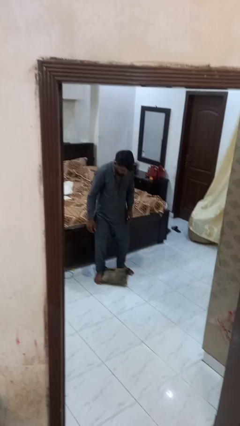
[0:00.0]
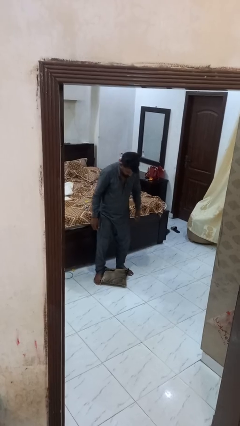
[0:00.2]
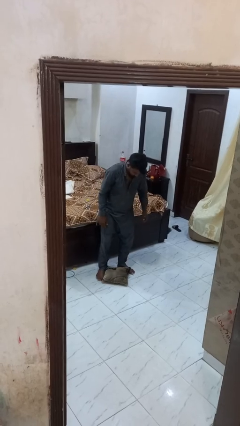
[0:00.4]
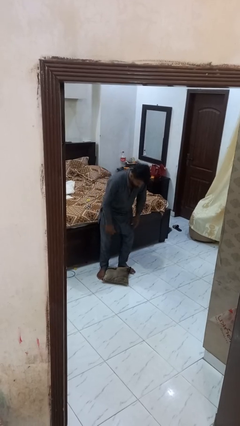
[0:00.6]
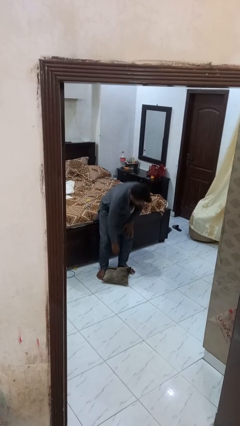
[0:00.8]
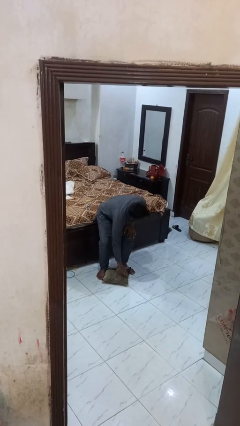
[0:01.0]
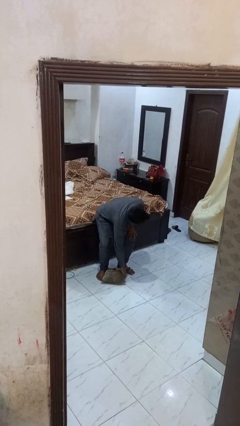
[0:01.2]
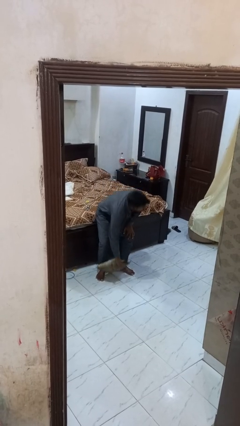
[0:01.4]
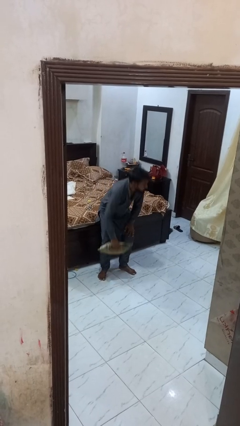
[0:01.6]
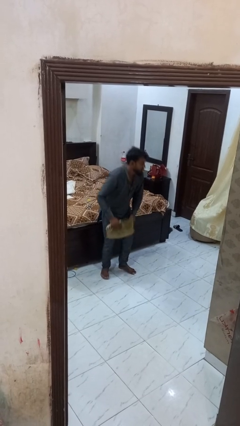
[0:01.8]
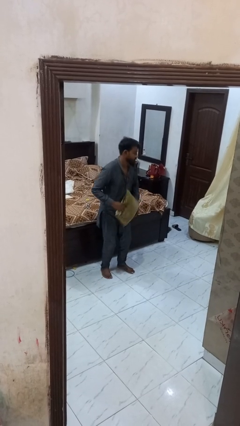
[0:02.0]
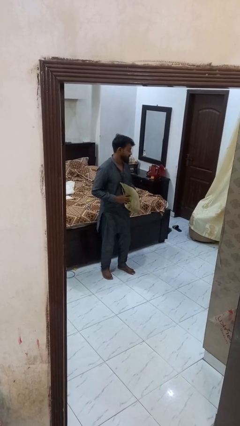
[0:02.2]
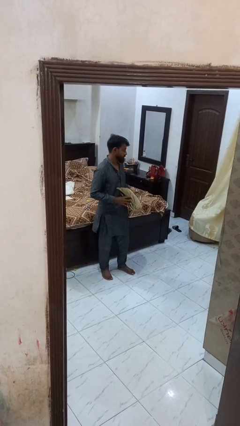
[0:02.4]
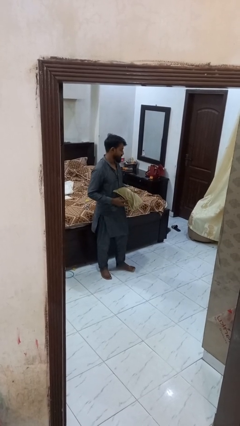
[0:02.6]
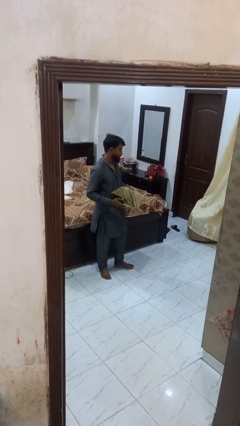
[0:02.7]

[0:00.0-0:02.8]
person picks up object from floor

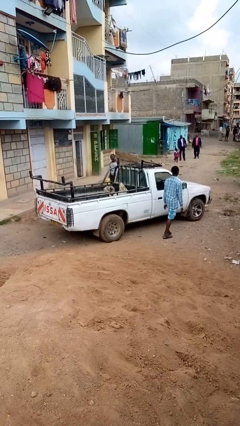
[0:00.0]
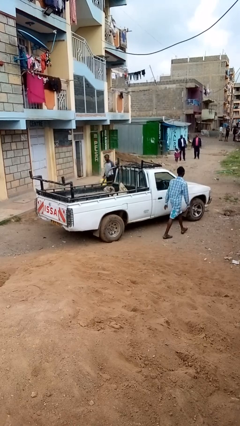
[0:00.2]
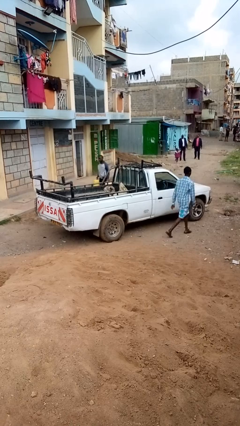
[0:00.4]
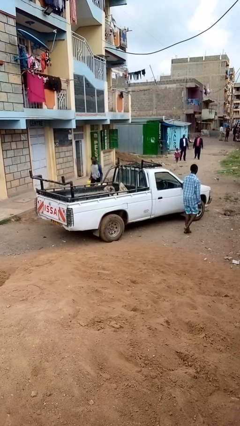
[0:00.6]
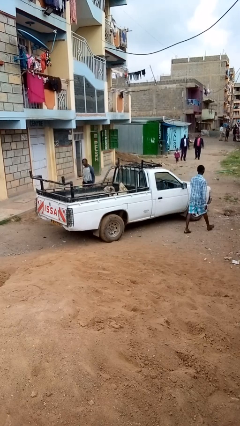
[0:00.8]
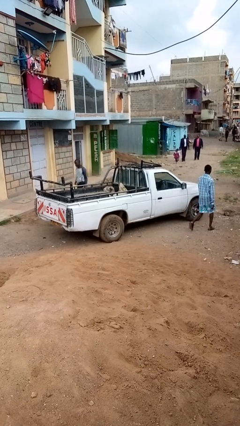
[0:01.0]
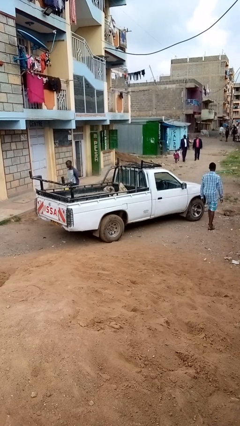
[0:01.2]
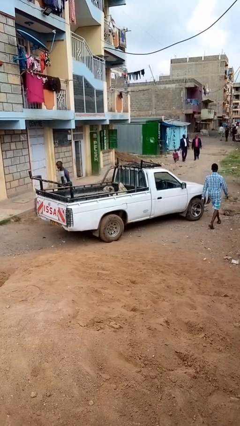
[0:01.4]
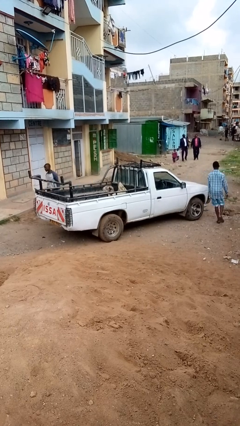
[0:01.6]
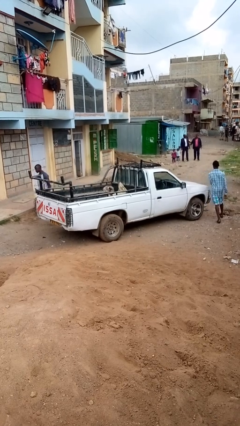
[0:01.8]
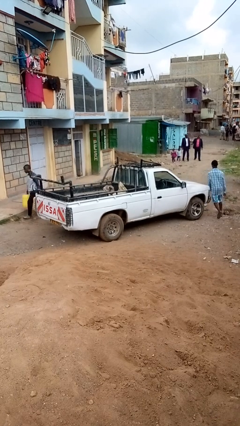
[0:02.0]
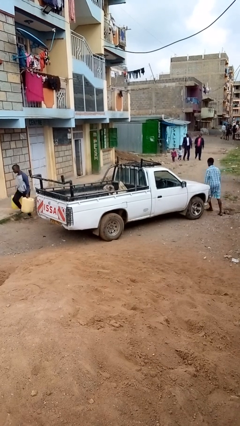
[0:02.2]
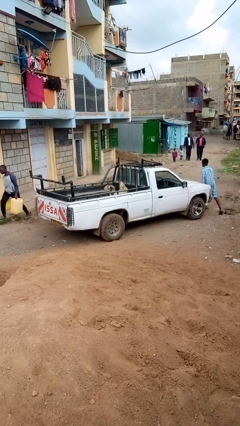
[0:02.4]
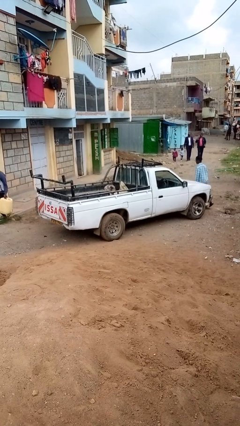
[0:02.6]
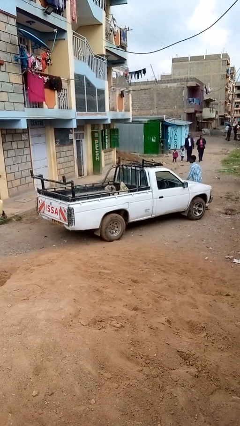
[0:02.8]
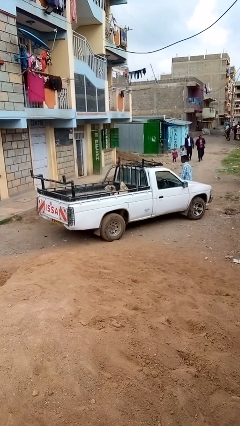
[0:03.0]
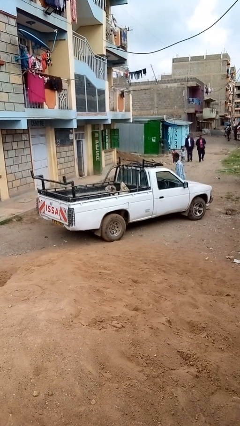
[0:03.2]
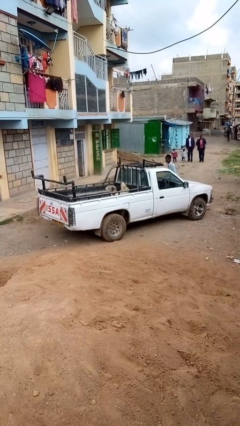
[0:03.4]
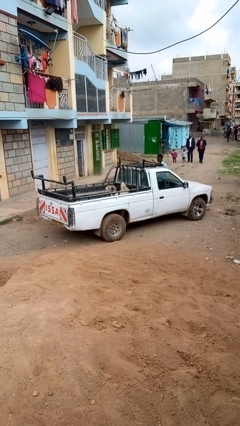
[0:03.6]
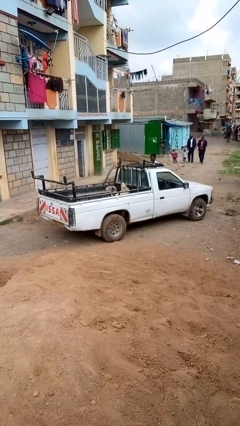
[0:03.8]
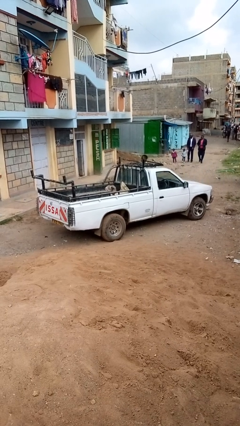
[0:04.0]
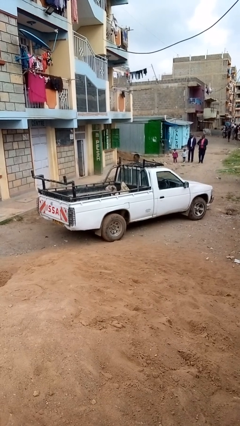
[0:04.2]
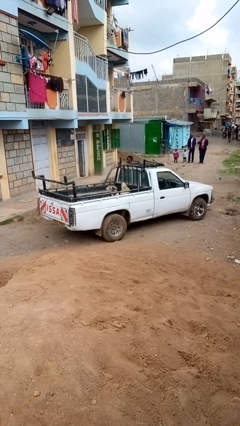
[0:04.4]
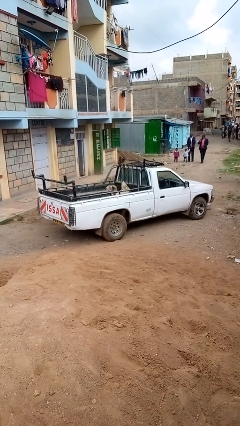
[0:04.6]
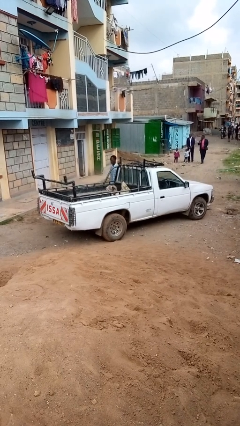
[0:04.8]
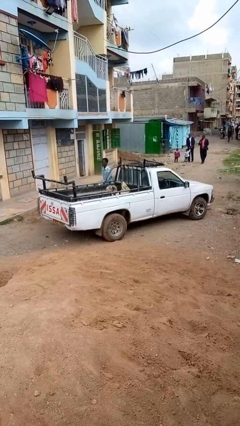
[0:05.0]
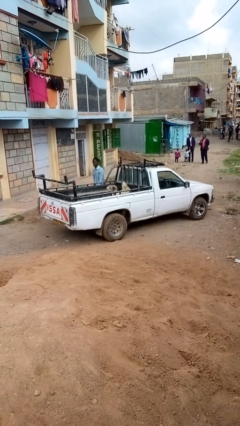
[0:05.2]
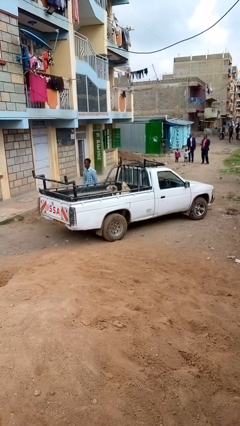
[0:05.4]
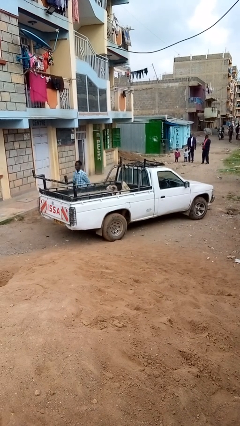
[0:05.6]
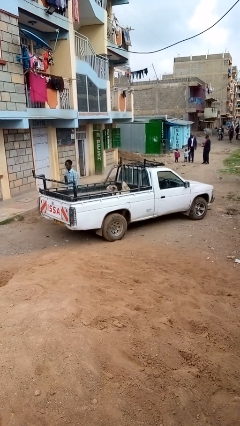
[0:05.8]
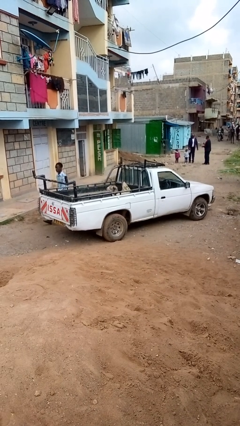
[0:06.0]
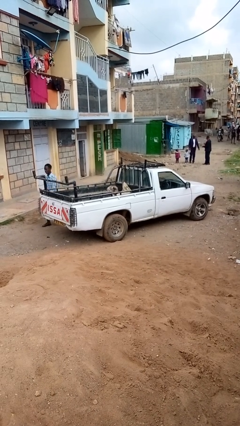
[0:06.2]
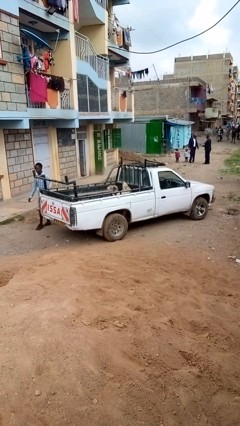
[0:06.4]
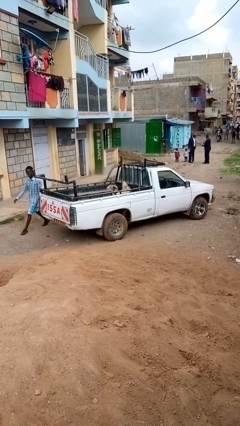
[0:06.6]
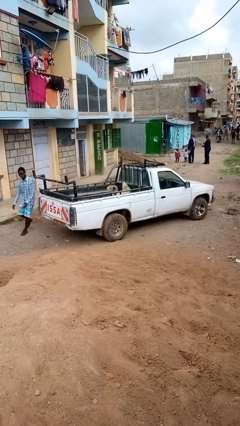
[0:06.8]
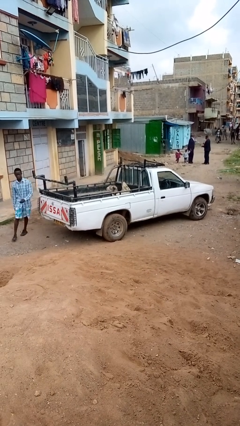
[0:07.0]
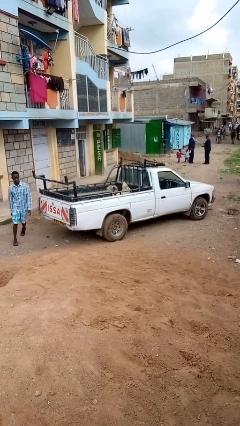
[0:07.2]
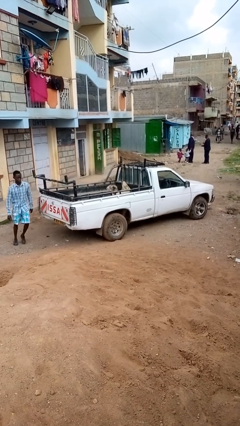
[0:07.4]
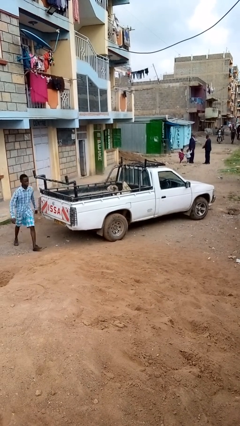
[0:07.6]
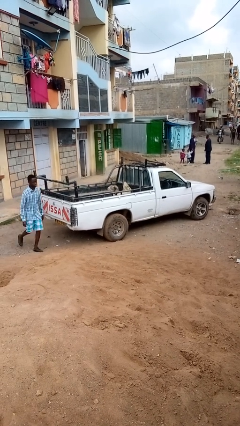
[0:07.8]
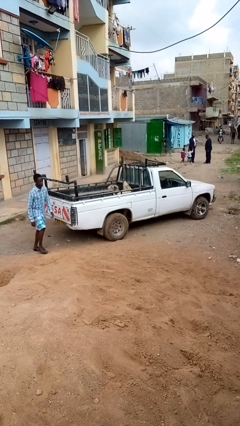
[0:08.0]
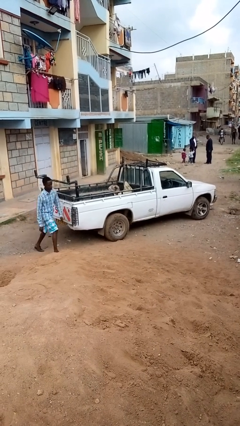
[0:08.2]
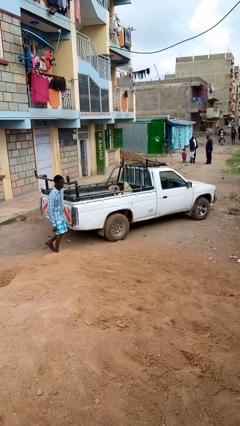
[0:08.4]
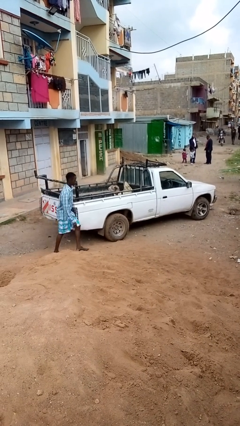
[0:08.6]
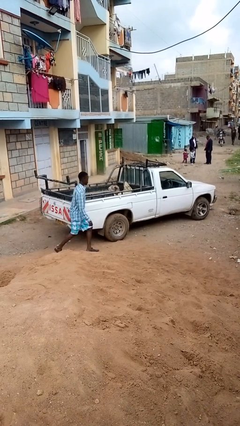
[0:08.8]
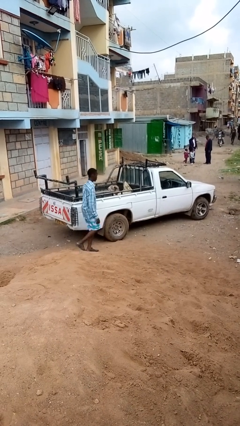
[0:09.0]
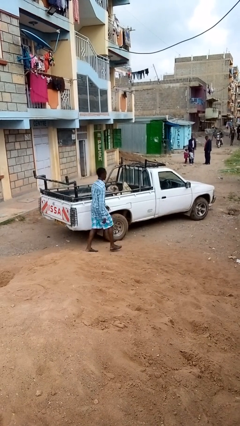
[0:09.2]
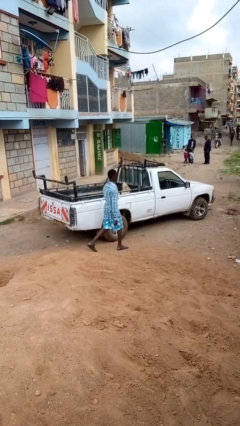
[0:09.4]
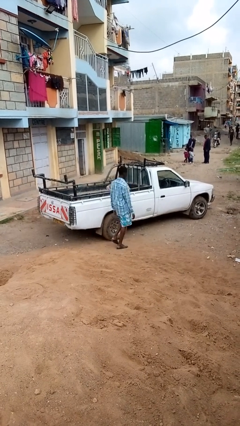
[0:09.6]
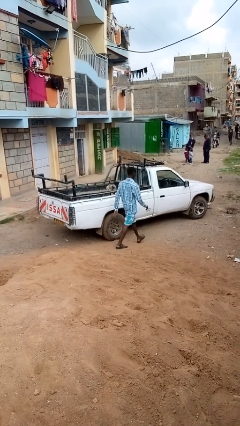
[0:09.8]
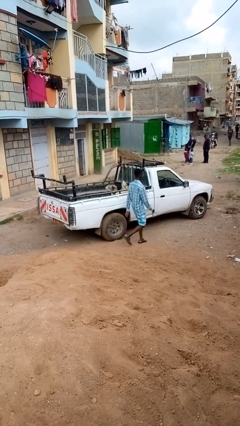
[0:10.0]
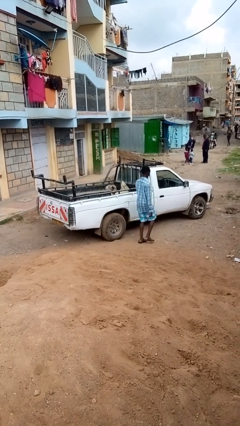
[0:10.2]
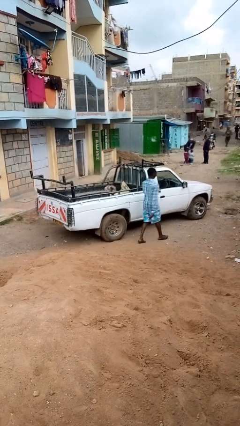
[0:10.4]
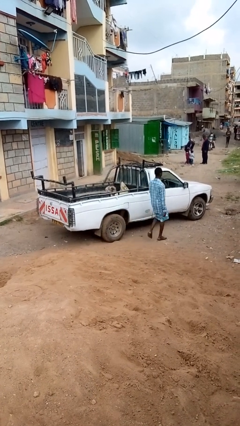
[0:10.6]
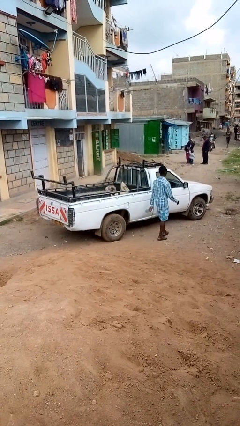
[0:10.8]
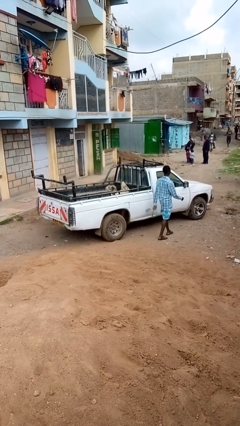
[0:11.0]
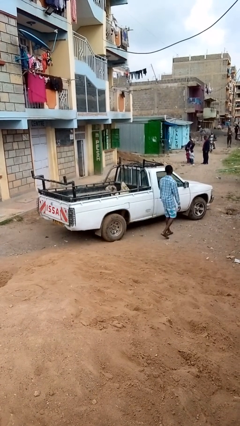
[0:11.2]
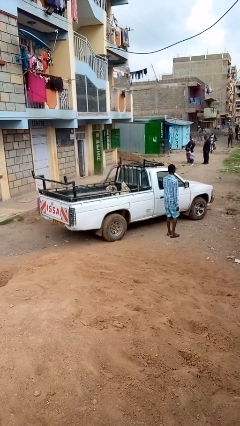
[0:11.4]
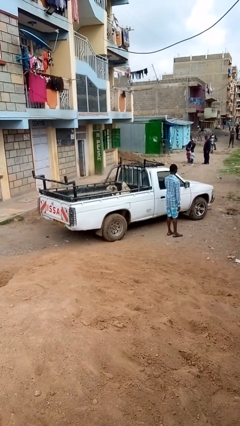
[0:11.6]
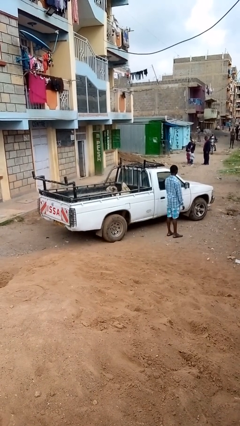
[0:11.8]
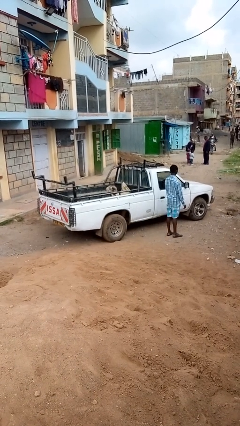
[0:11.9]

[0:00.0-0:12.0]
person walks around car

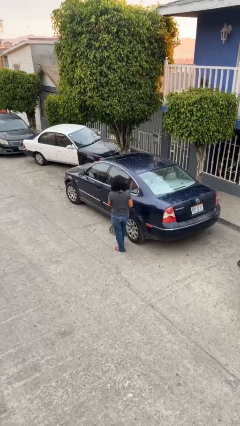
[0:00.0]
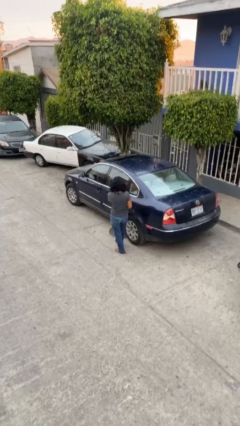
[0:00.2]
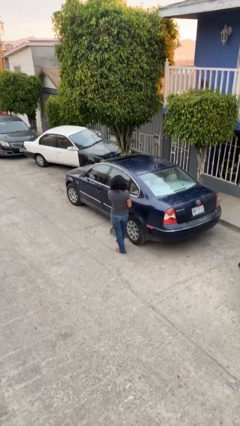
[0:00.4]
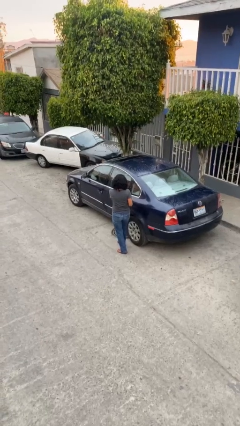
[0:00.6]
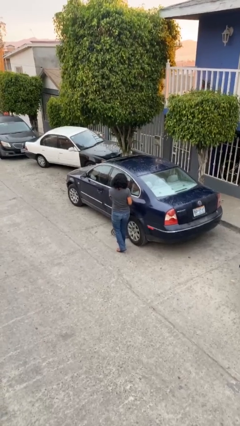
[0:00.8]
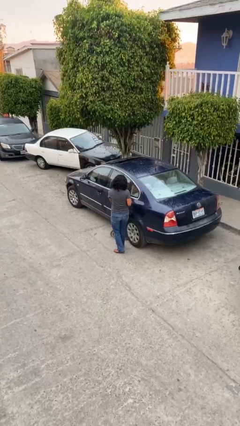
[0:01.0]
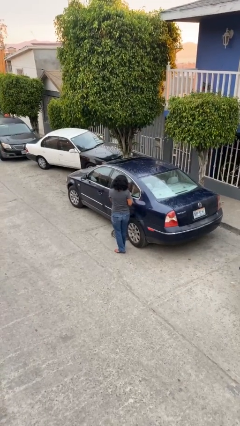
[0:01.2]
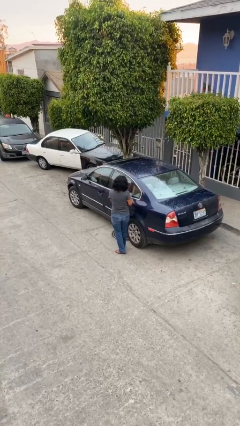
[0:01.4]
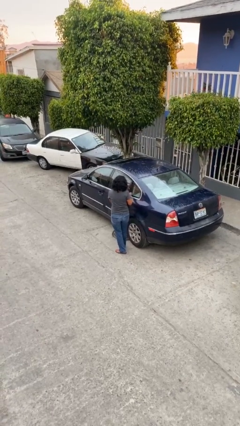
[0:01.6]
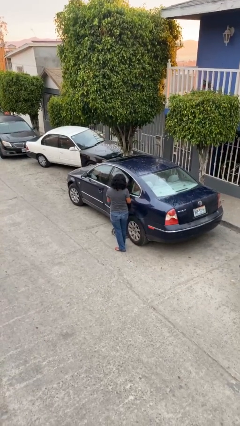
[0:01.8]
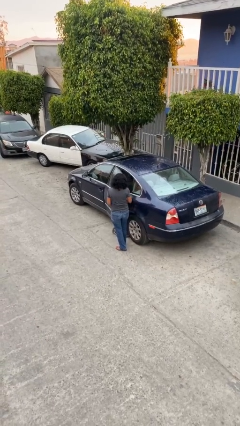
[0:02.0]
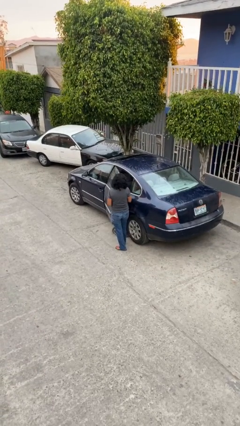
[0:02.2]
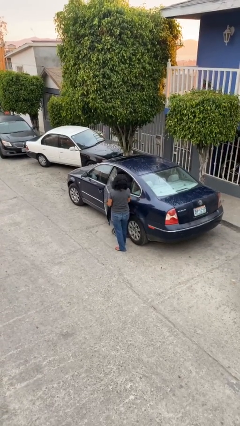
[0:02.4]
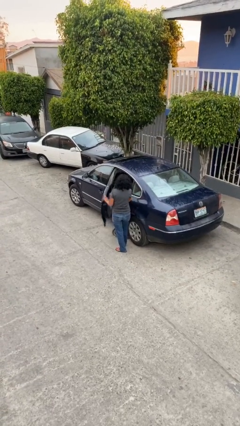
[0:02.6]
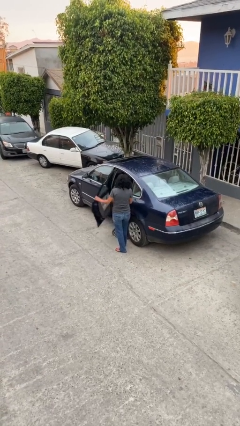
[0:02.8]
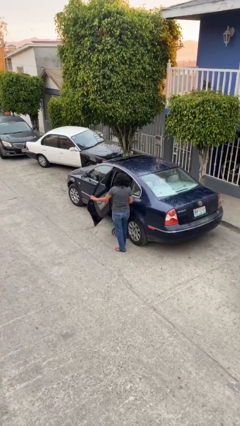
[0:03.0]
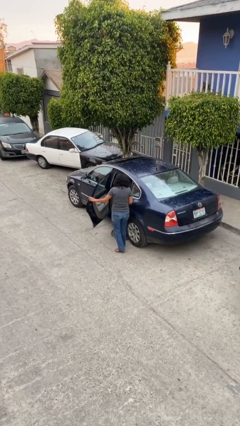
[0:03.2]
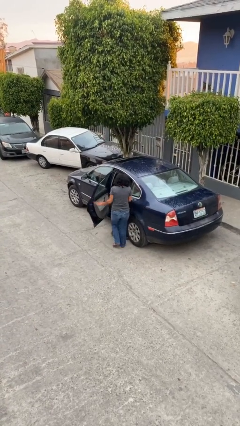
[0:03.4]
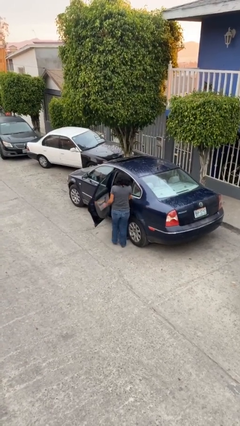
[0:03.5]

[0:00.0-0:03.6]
person opens car door
